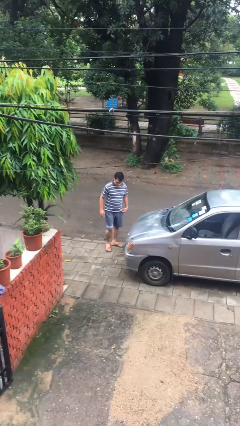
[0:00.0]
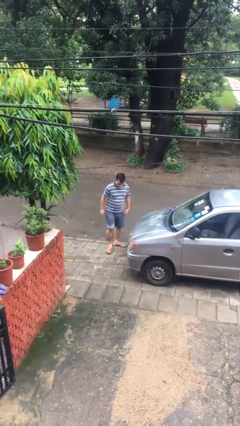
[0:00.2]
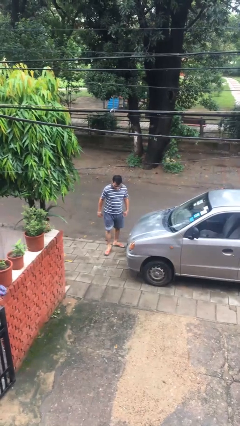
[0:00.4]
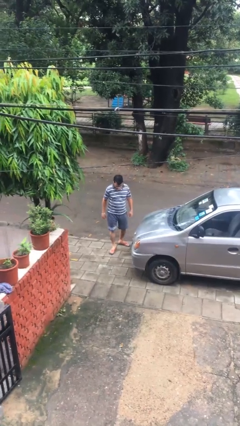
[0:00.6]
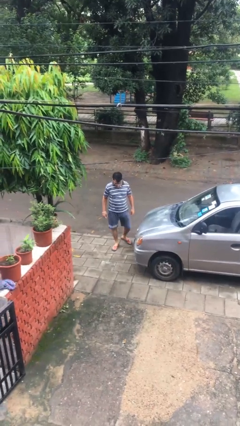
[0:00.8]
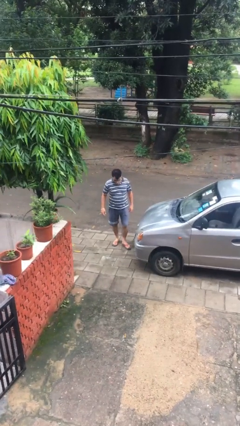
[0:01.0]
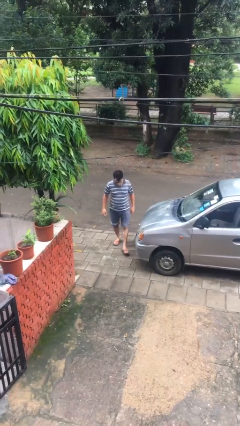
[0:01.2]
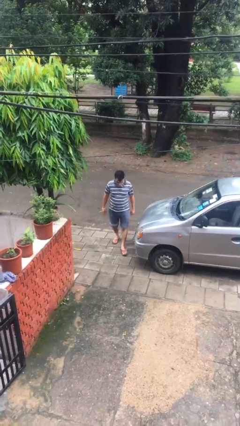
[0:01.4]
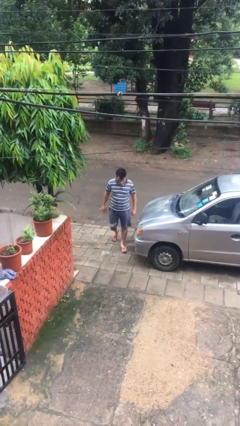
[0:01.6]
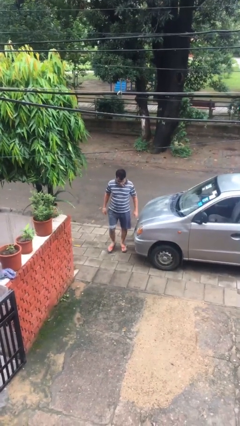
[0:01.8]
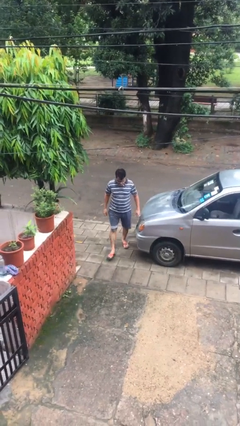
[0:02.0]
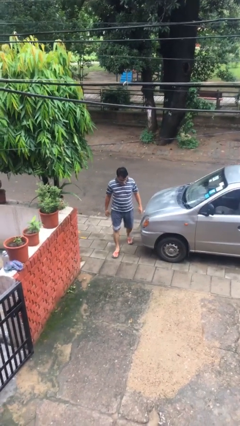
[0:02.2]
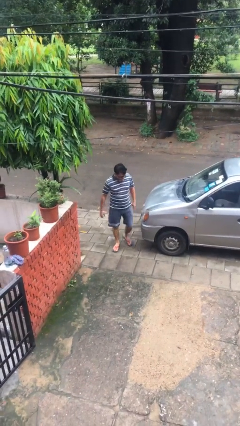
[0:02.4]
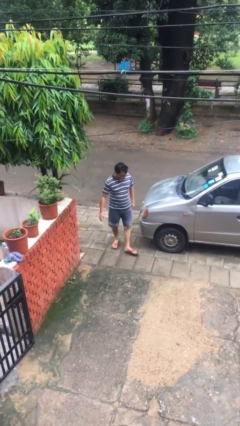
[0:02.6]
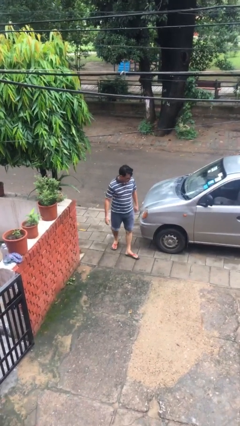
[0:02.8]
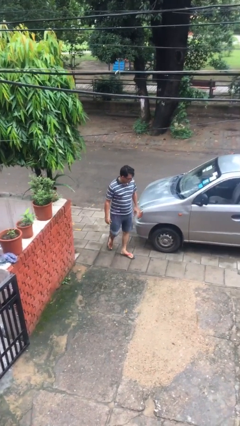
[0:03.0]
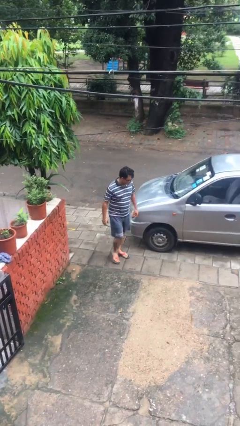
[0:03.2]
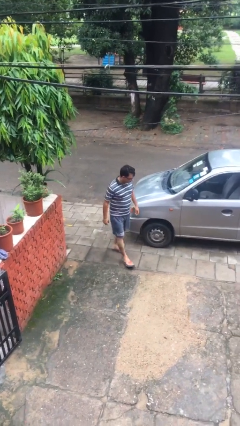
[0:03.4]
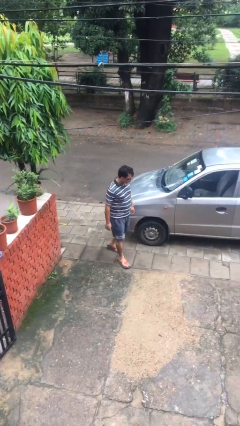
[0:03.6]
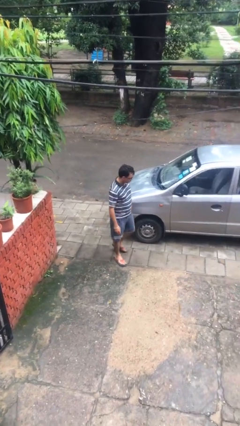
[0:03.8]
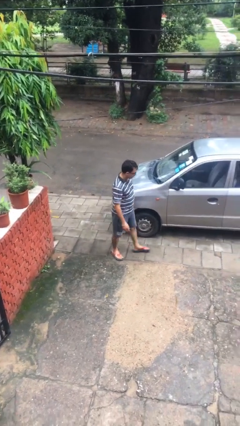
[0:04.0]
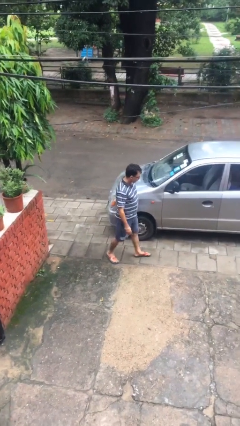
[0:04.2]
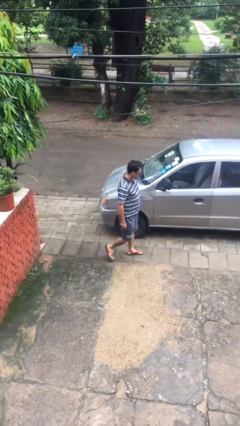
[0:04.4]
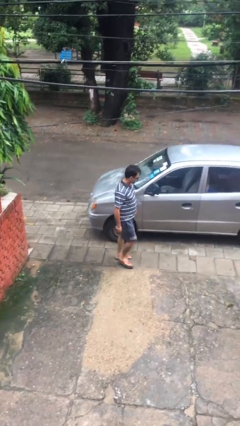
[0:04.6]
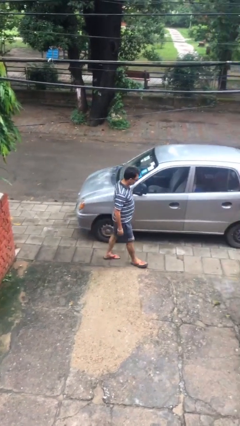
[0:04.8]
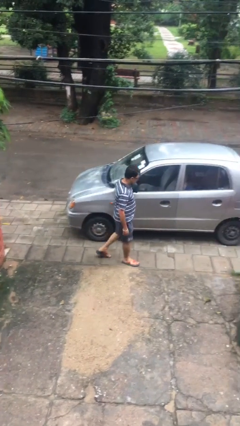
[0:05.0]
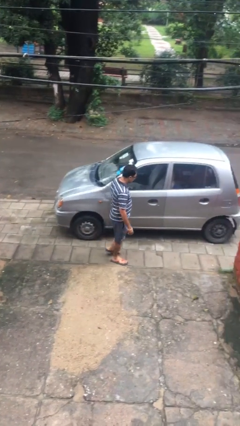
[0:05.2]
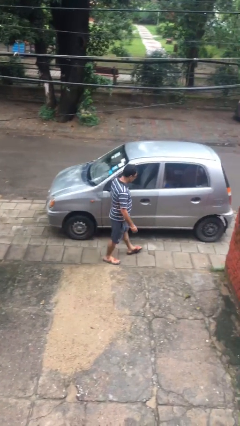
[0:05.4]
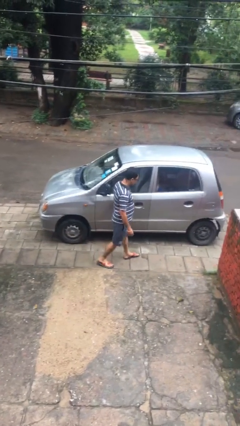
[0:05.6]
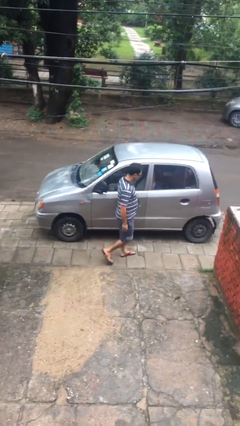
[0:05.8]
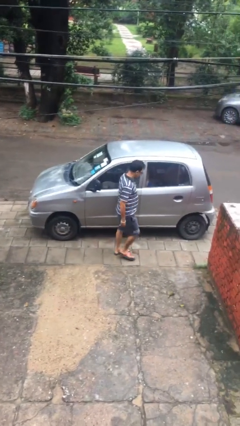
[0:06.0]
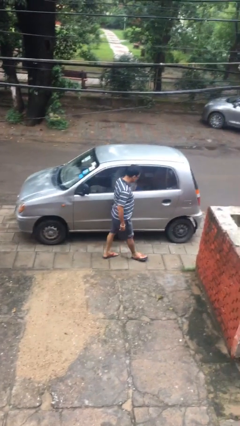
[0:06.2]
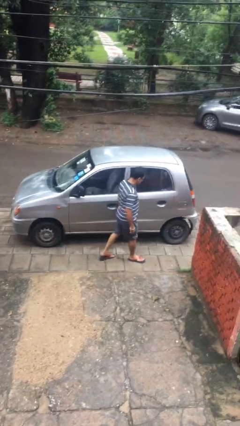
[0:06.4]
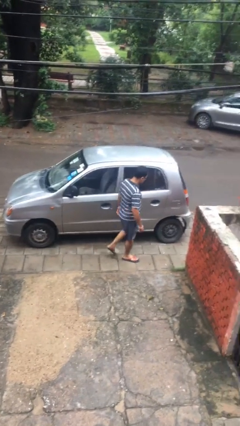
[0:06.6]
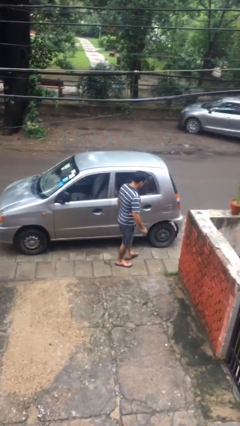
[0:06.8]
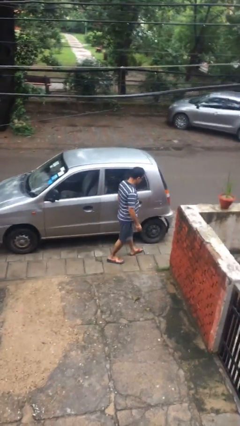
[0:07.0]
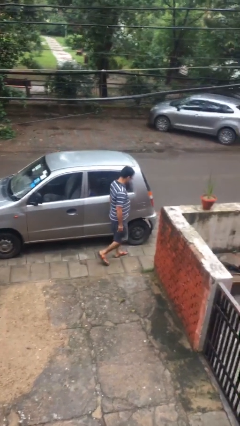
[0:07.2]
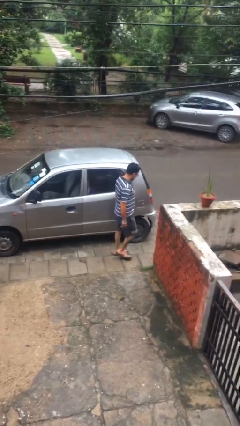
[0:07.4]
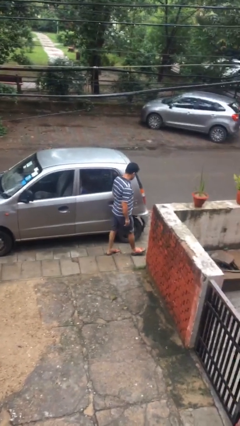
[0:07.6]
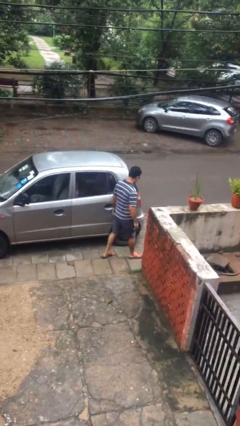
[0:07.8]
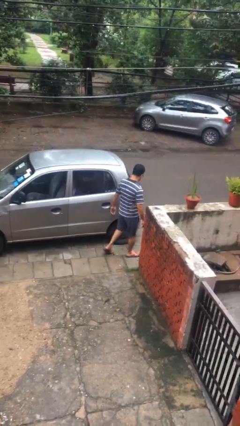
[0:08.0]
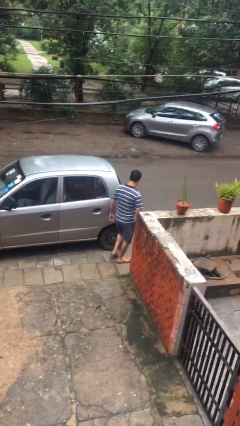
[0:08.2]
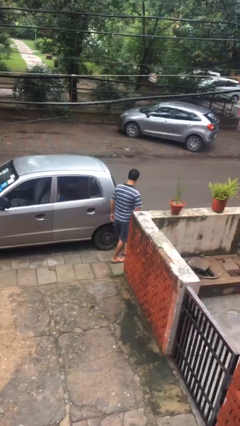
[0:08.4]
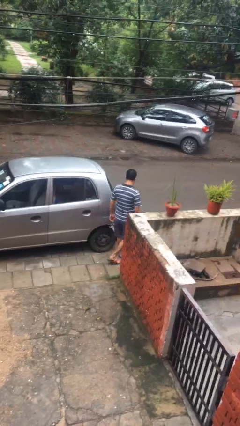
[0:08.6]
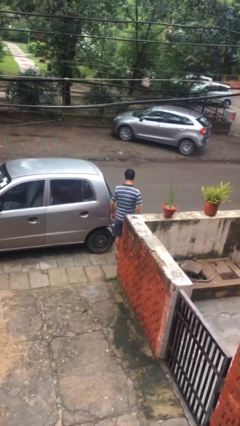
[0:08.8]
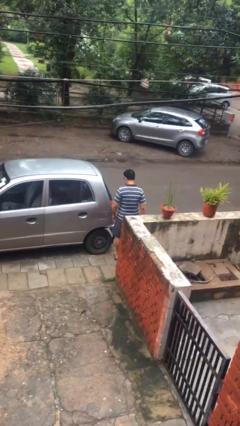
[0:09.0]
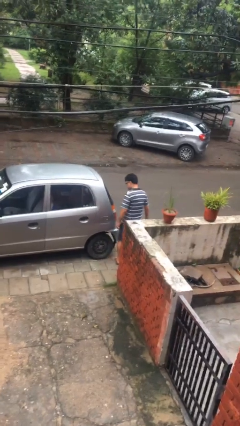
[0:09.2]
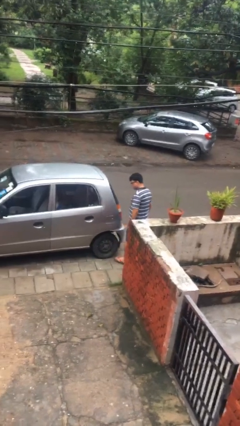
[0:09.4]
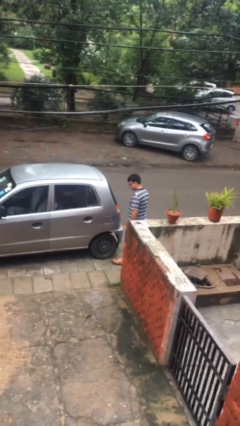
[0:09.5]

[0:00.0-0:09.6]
person walks around car

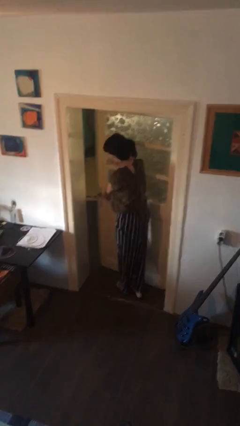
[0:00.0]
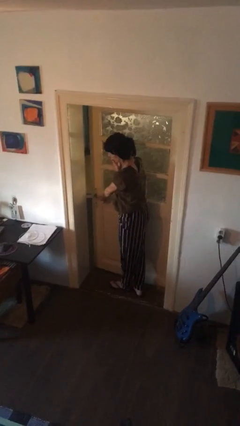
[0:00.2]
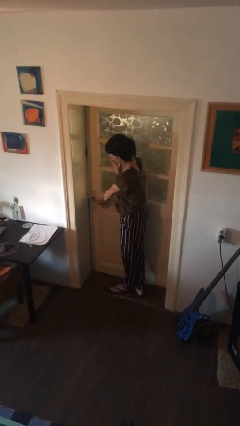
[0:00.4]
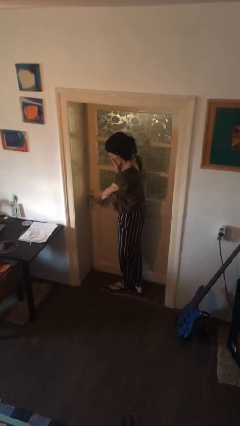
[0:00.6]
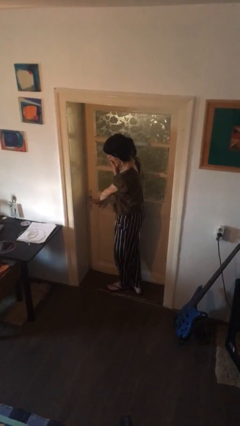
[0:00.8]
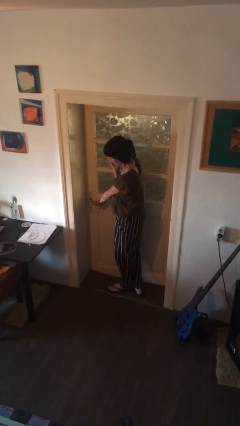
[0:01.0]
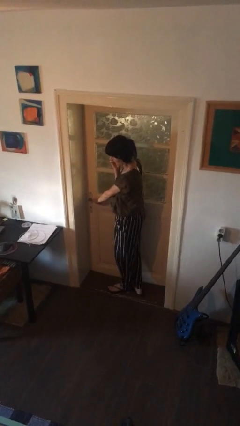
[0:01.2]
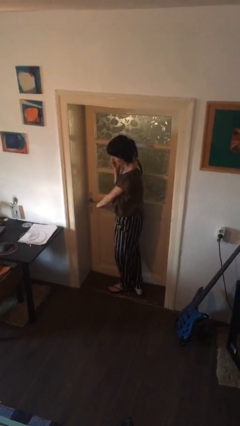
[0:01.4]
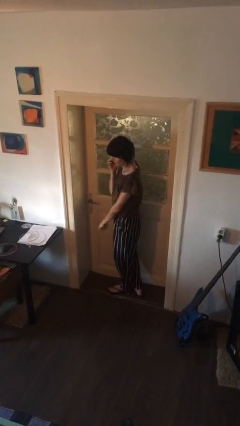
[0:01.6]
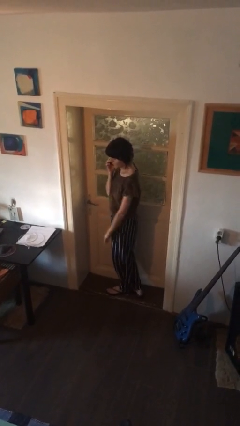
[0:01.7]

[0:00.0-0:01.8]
person closes facility door

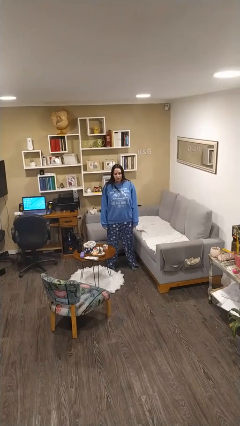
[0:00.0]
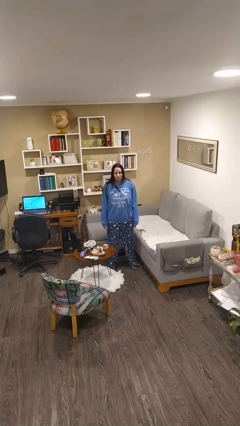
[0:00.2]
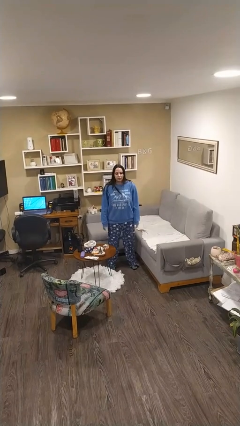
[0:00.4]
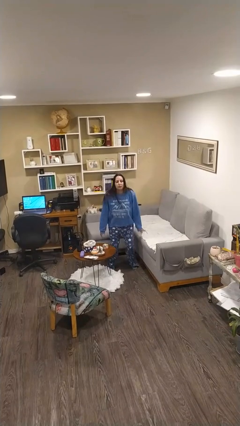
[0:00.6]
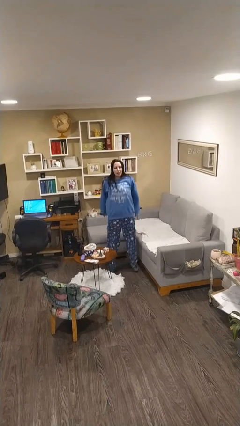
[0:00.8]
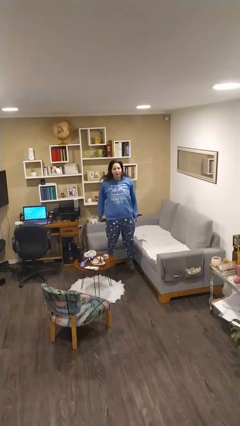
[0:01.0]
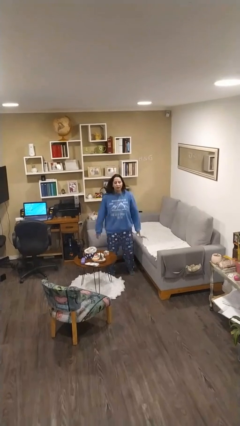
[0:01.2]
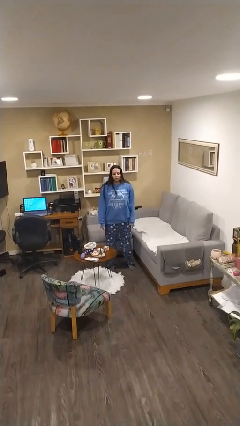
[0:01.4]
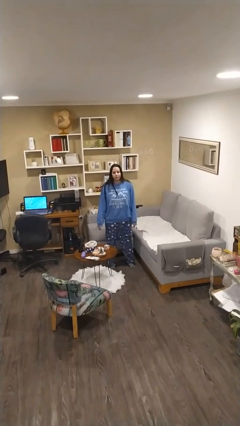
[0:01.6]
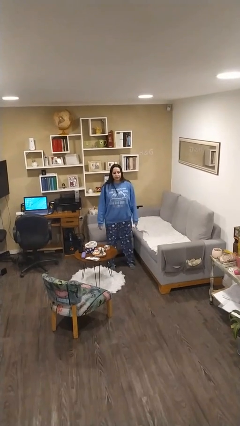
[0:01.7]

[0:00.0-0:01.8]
person jumps

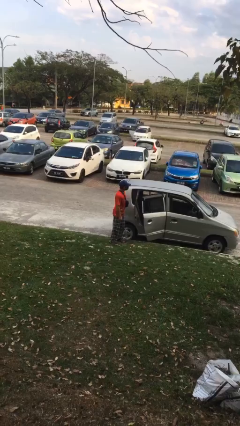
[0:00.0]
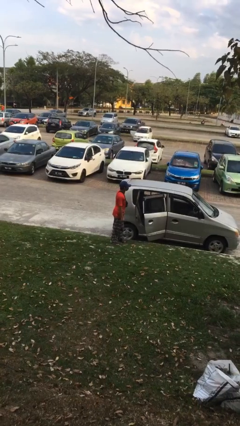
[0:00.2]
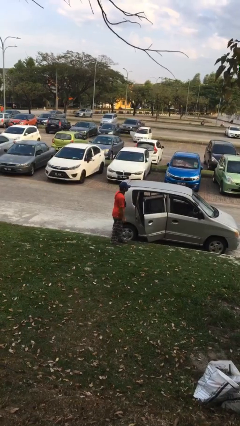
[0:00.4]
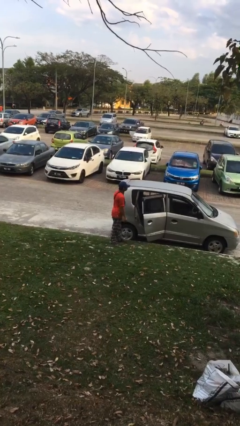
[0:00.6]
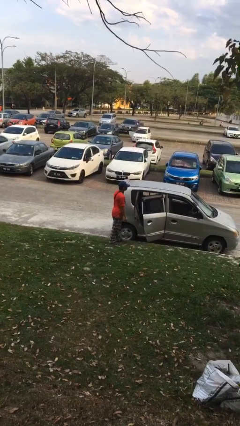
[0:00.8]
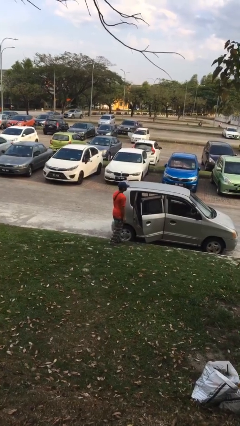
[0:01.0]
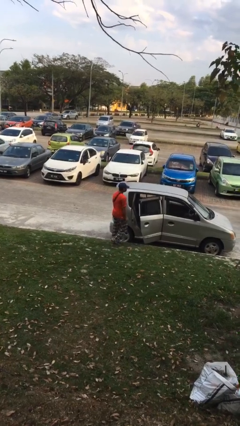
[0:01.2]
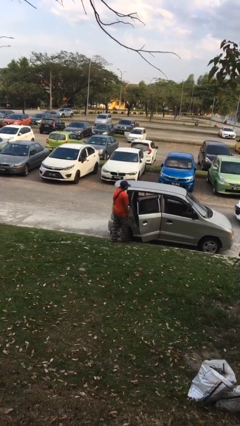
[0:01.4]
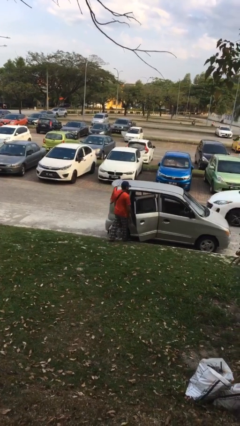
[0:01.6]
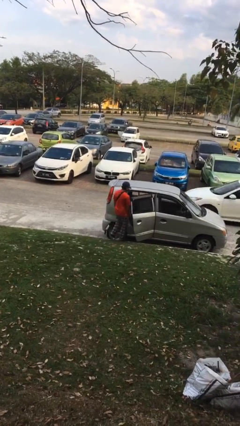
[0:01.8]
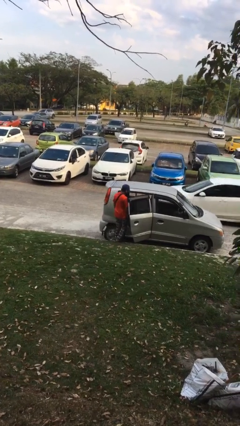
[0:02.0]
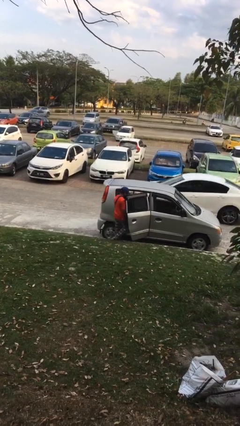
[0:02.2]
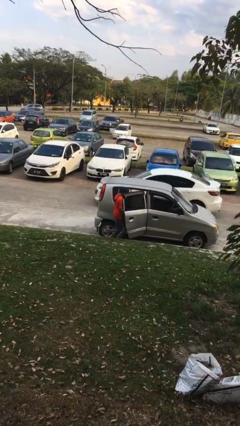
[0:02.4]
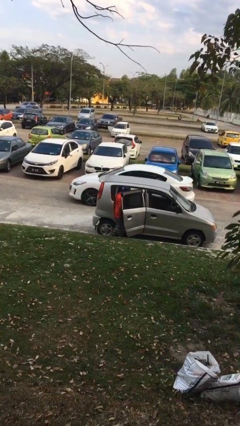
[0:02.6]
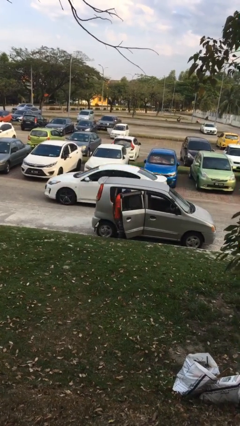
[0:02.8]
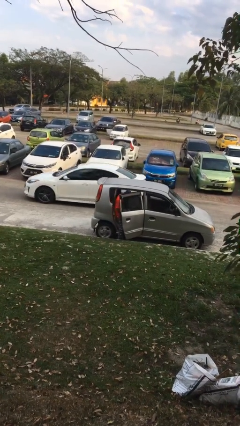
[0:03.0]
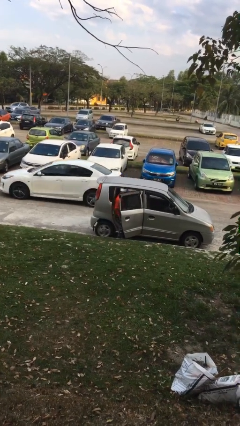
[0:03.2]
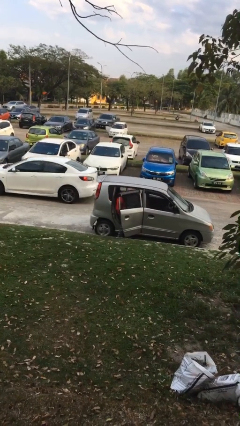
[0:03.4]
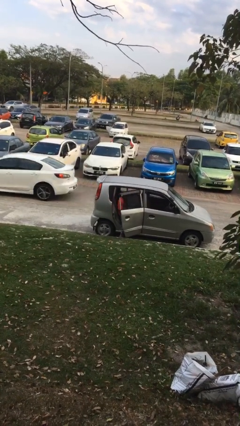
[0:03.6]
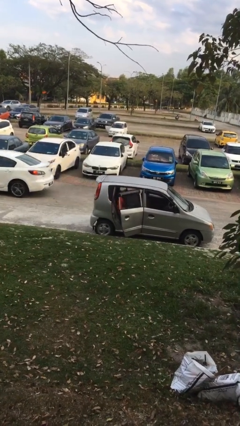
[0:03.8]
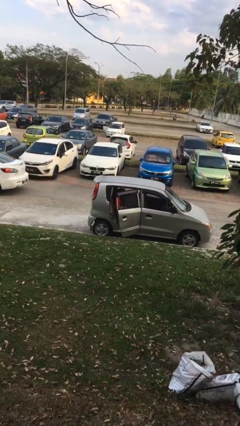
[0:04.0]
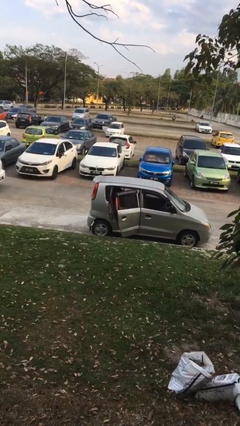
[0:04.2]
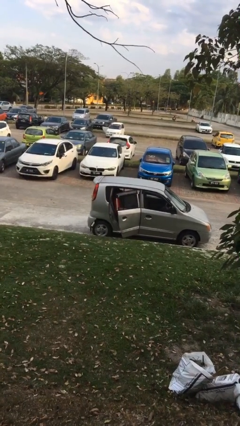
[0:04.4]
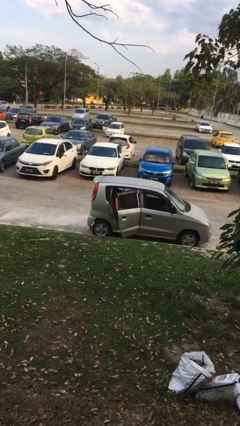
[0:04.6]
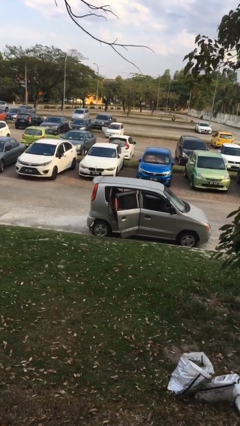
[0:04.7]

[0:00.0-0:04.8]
person enters car
